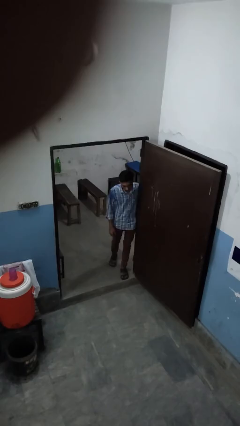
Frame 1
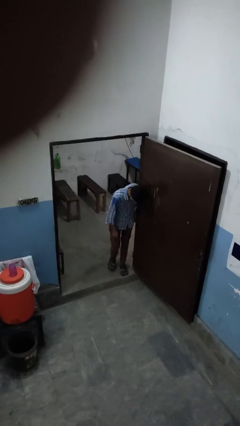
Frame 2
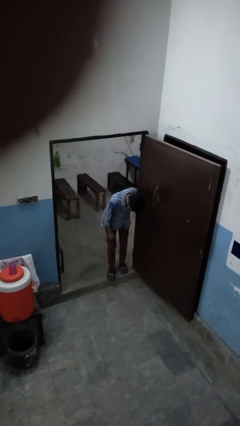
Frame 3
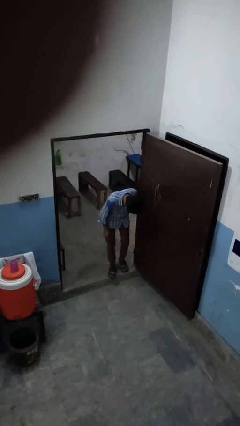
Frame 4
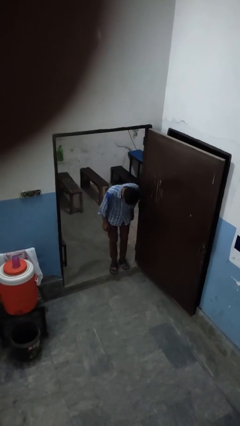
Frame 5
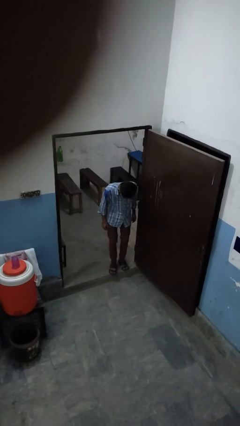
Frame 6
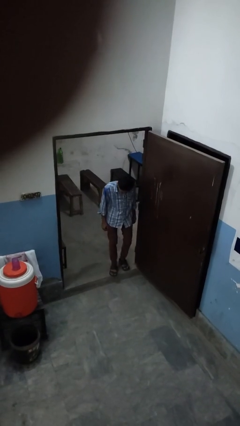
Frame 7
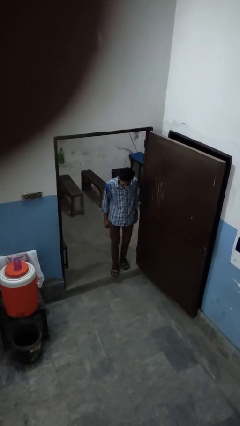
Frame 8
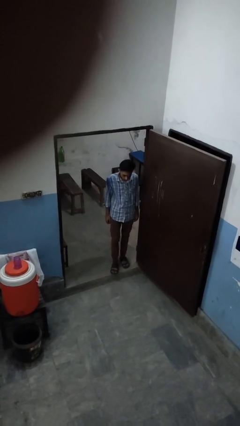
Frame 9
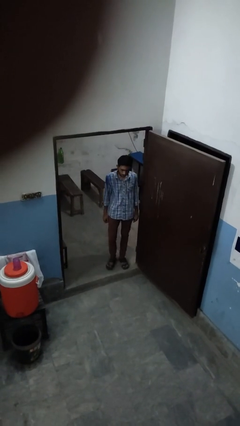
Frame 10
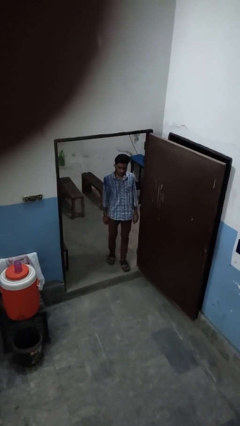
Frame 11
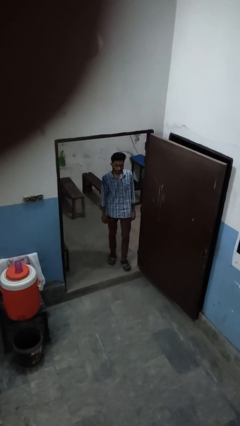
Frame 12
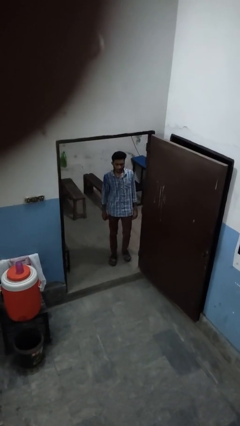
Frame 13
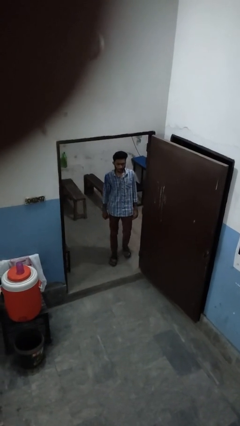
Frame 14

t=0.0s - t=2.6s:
person bumps into wall

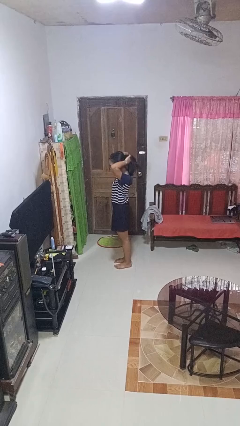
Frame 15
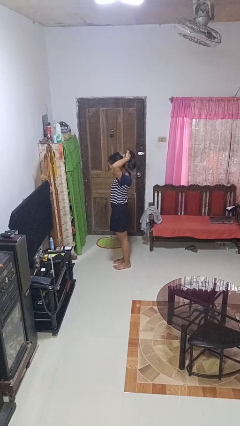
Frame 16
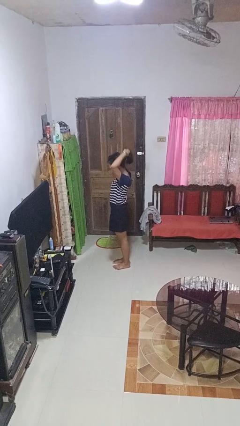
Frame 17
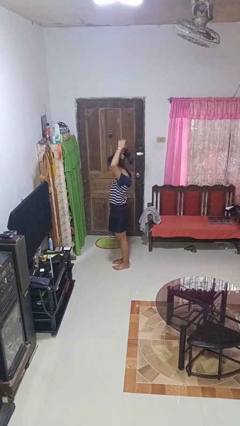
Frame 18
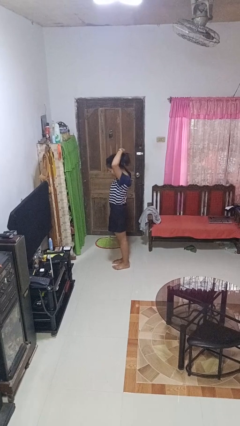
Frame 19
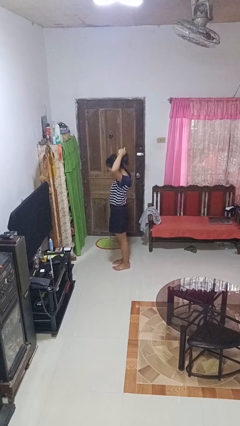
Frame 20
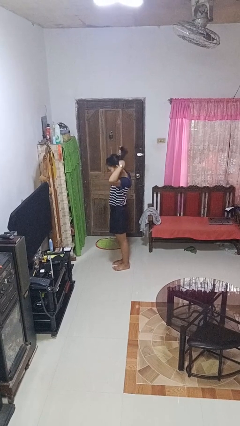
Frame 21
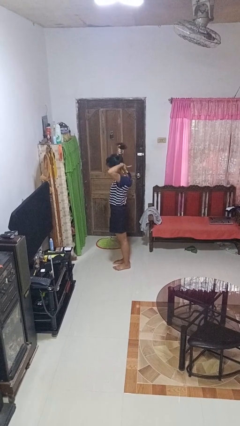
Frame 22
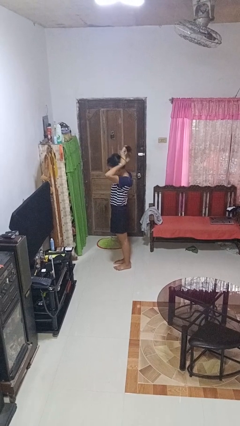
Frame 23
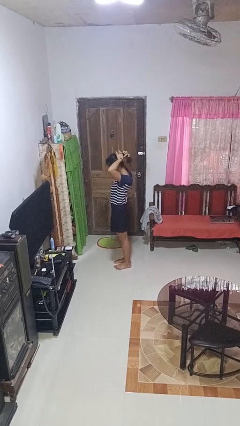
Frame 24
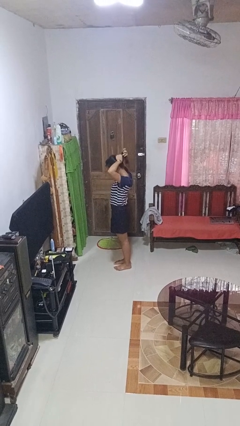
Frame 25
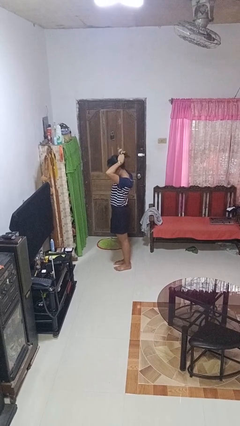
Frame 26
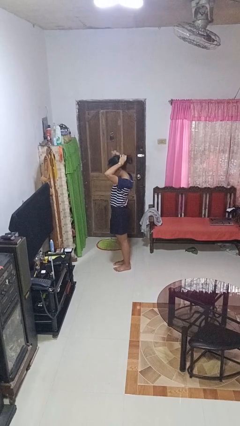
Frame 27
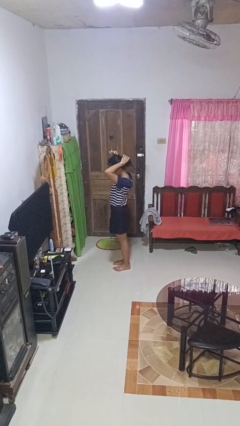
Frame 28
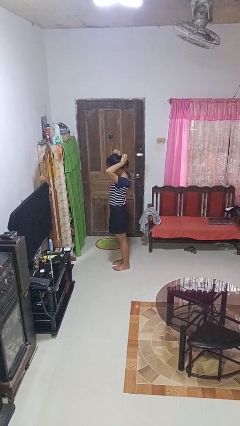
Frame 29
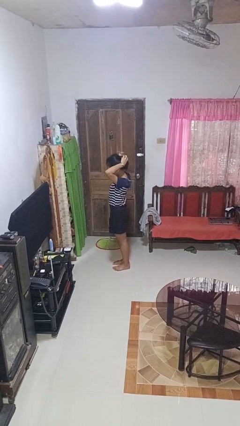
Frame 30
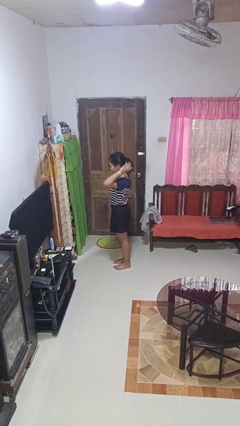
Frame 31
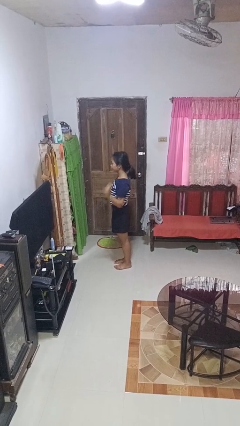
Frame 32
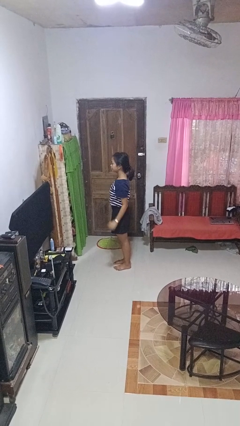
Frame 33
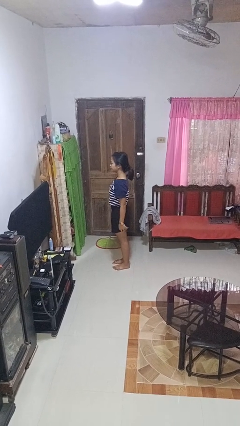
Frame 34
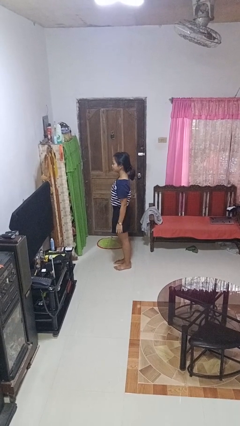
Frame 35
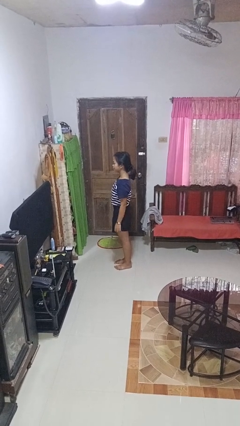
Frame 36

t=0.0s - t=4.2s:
person puts hair in ponytail

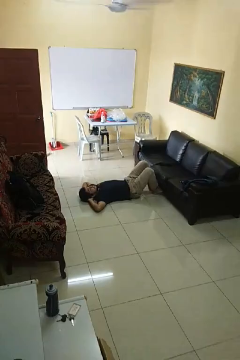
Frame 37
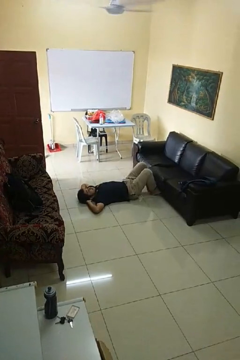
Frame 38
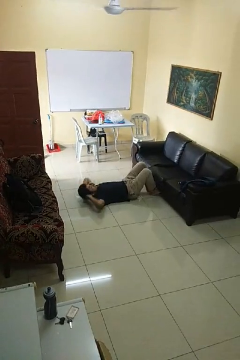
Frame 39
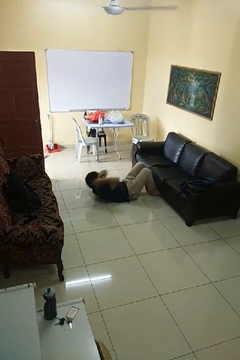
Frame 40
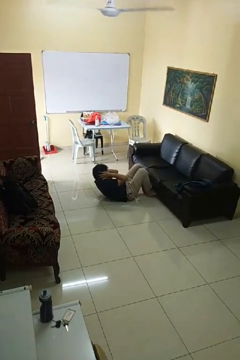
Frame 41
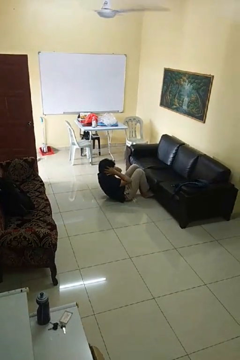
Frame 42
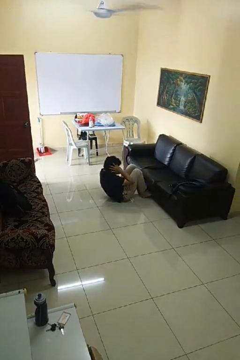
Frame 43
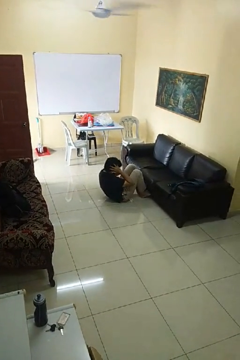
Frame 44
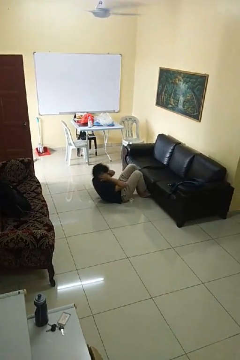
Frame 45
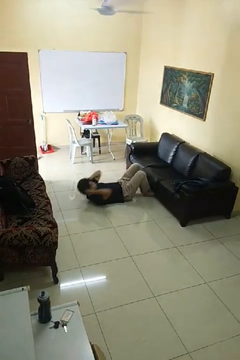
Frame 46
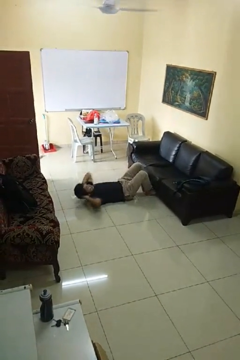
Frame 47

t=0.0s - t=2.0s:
person exercises with situp

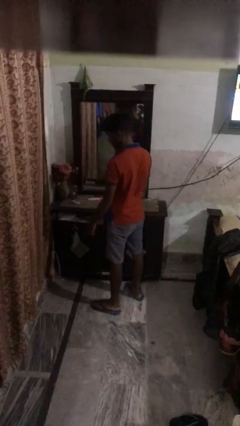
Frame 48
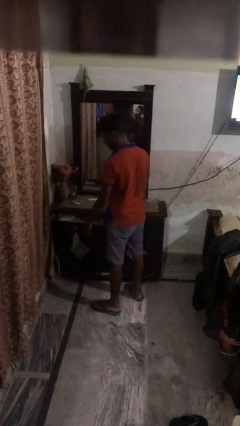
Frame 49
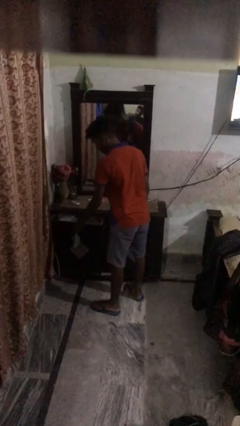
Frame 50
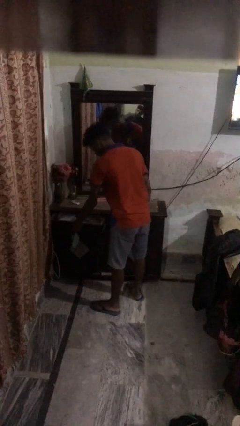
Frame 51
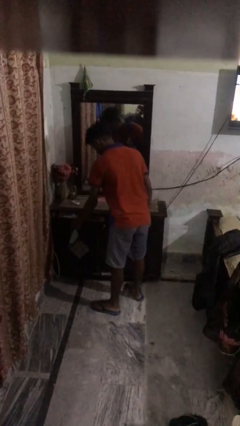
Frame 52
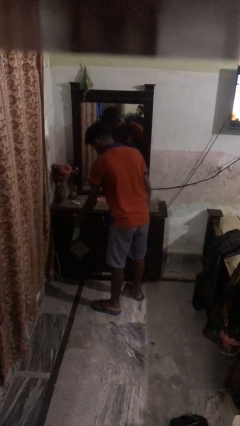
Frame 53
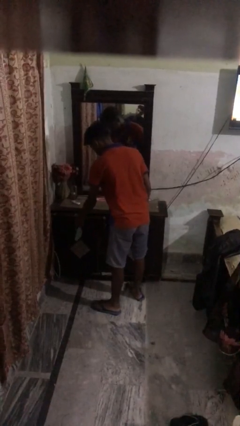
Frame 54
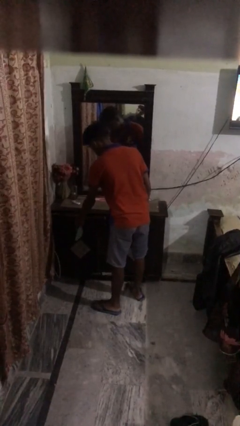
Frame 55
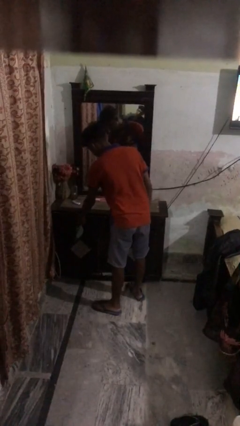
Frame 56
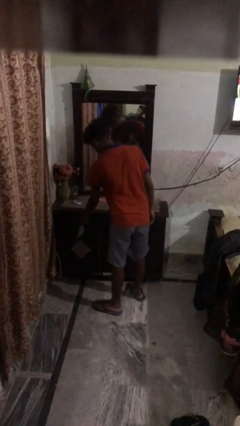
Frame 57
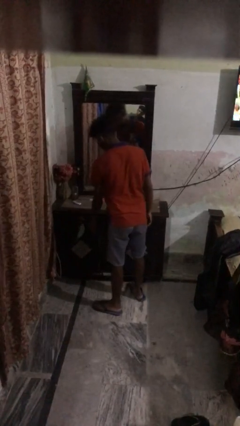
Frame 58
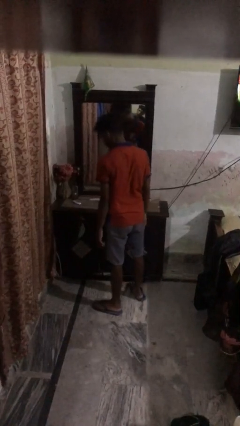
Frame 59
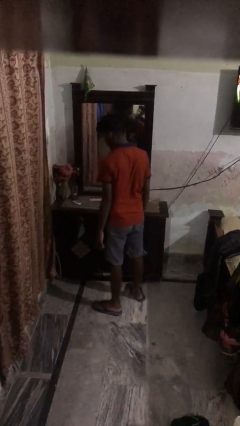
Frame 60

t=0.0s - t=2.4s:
person closes dresser drawer

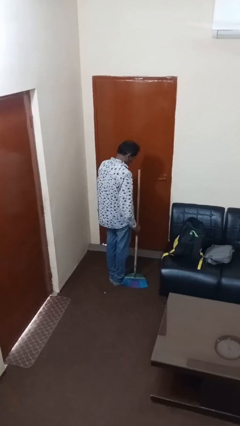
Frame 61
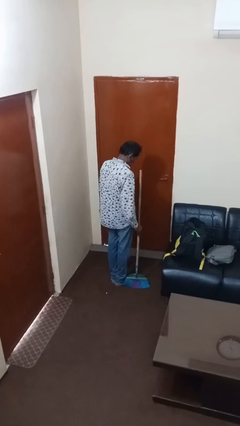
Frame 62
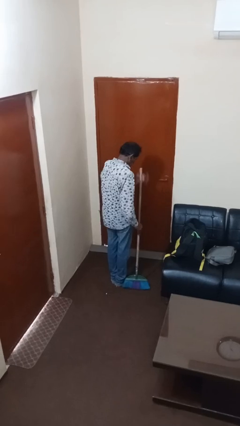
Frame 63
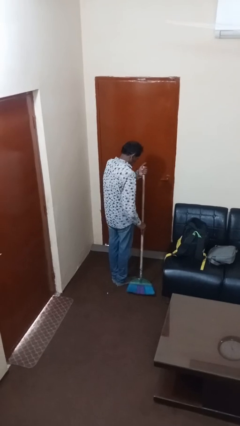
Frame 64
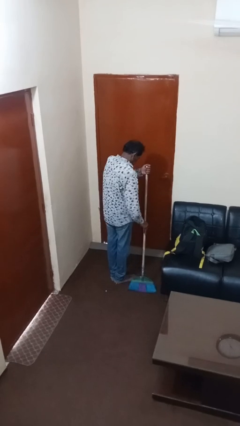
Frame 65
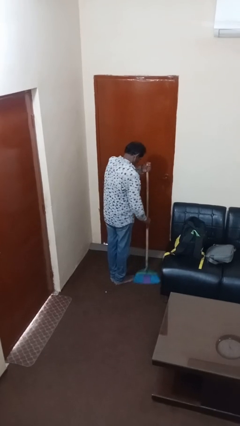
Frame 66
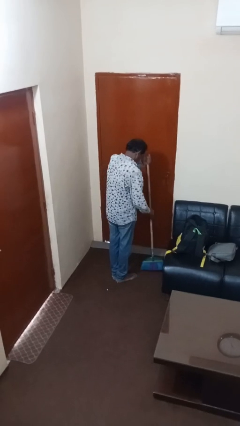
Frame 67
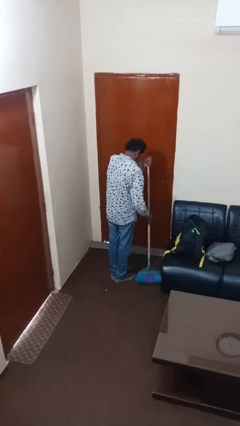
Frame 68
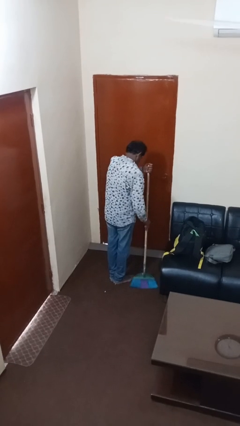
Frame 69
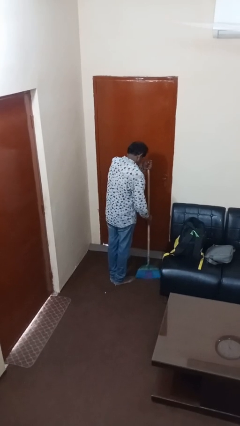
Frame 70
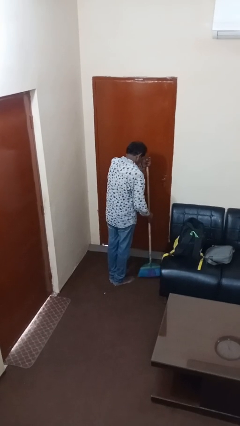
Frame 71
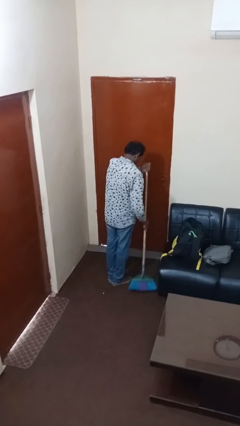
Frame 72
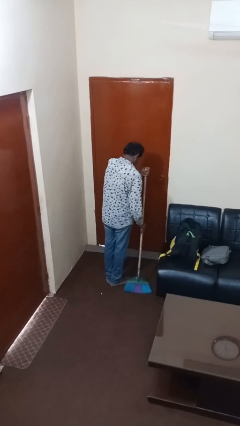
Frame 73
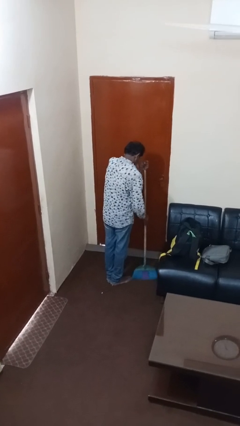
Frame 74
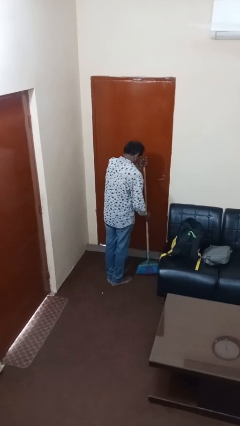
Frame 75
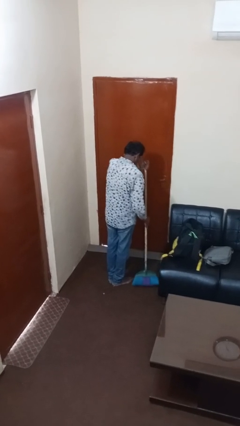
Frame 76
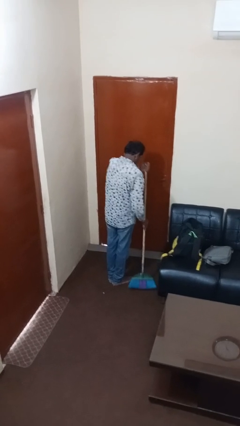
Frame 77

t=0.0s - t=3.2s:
person sweeps floor

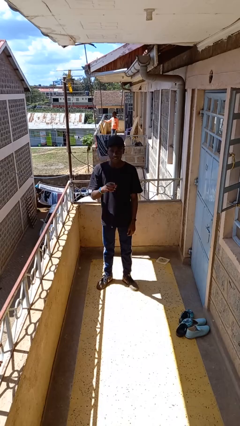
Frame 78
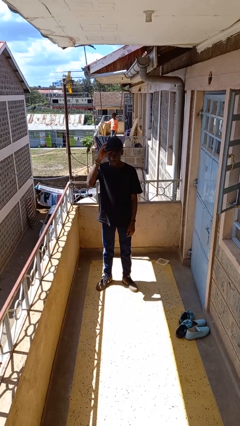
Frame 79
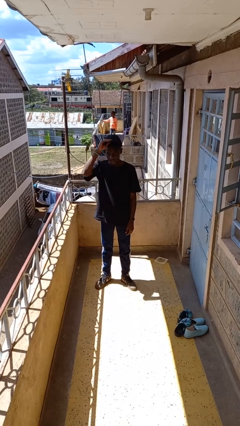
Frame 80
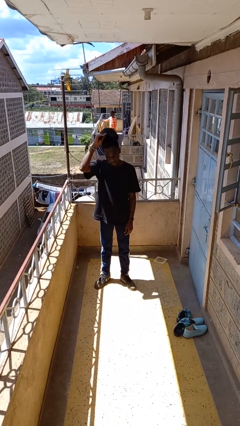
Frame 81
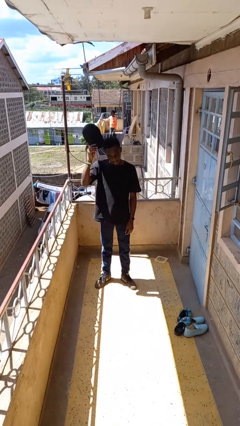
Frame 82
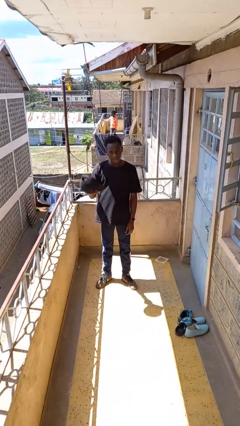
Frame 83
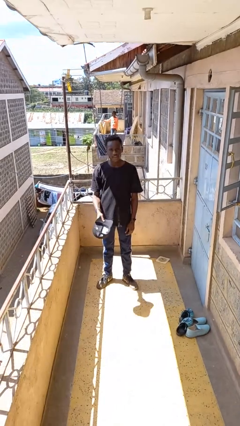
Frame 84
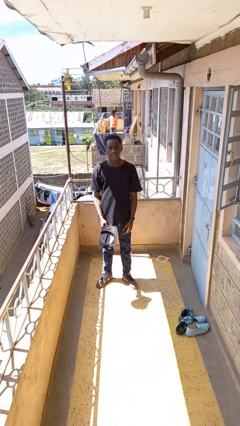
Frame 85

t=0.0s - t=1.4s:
person takes off hat

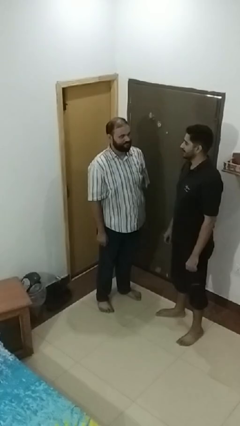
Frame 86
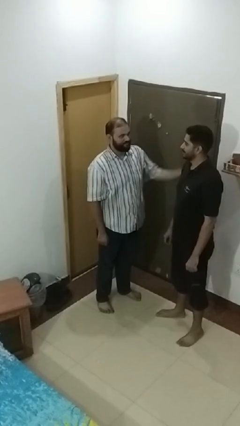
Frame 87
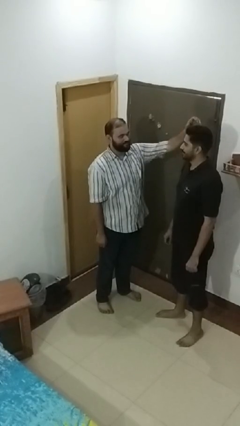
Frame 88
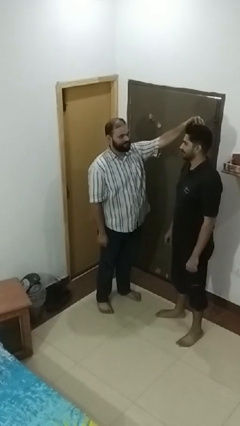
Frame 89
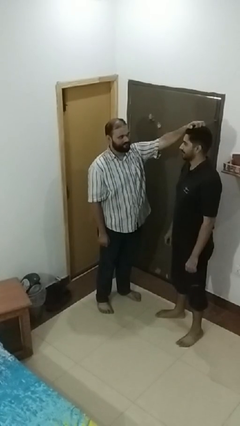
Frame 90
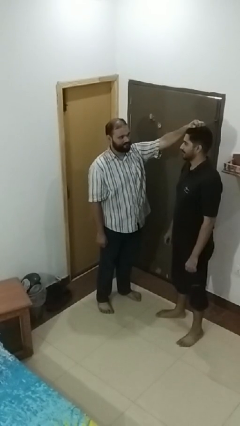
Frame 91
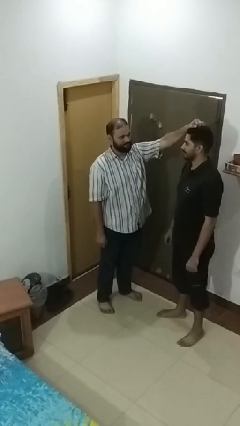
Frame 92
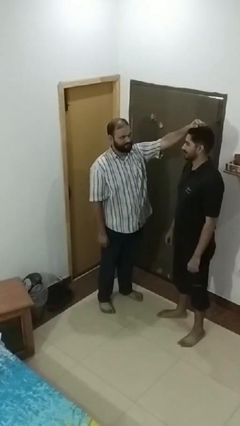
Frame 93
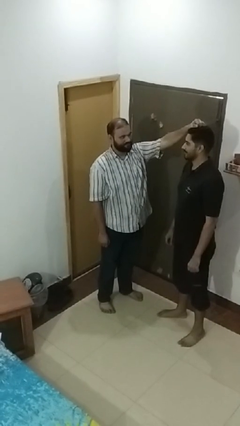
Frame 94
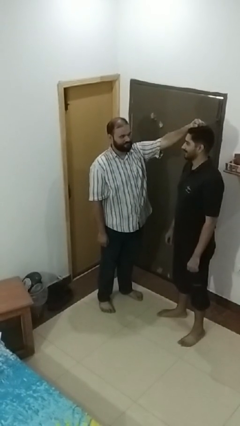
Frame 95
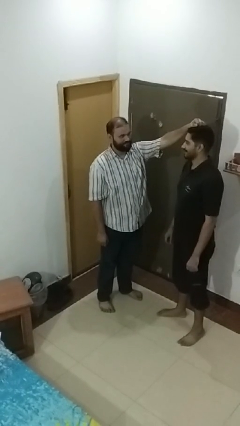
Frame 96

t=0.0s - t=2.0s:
person grabs person by hair
